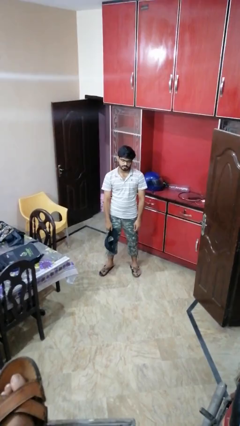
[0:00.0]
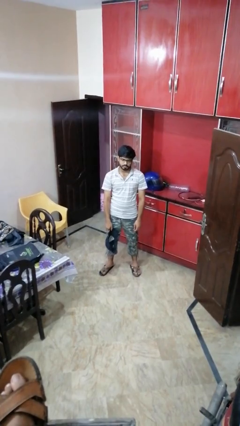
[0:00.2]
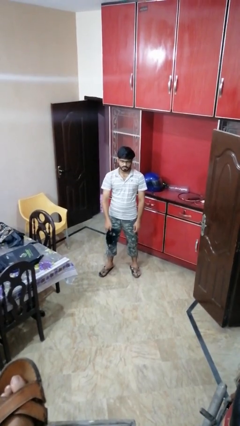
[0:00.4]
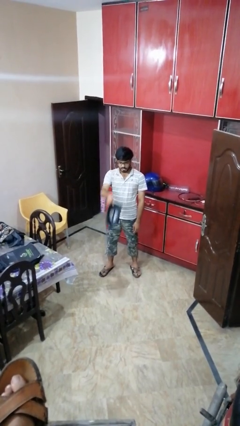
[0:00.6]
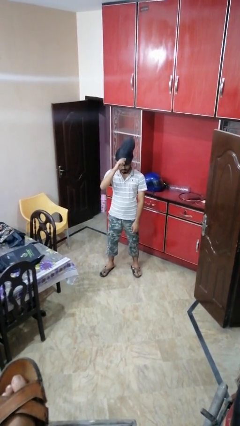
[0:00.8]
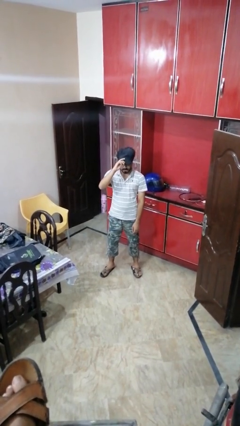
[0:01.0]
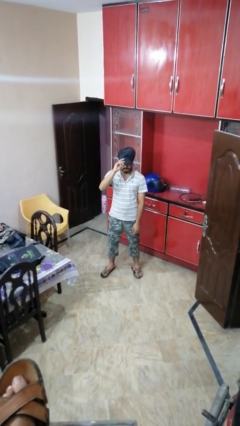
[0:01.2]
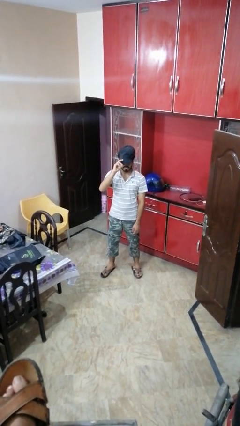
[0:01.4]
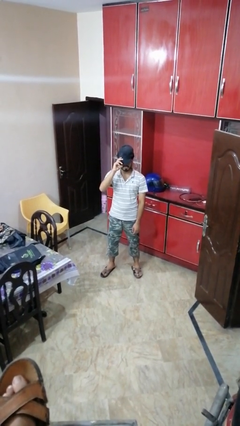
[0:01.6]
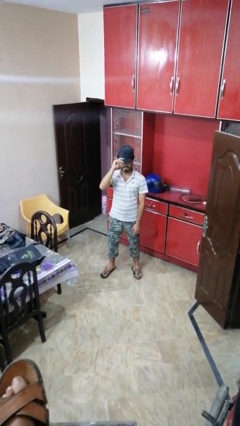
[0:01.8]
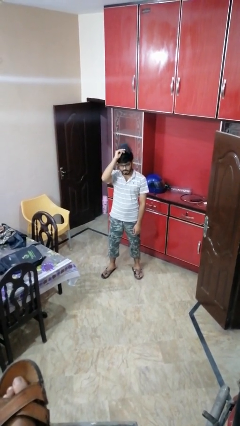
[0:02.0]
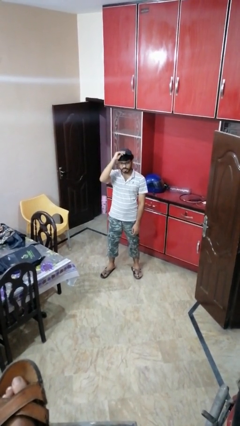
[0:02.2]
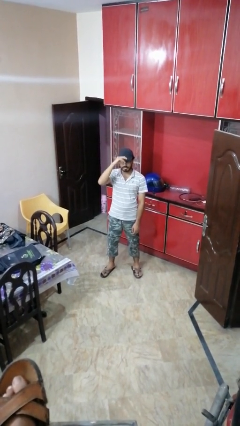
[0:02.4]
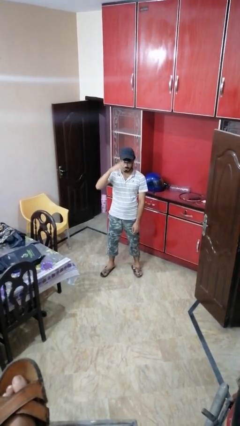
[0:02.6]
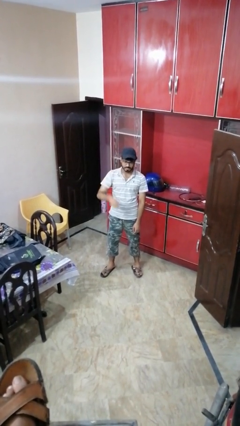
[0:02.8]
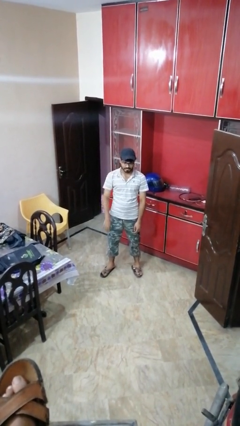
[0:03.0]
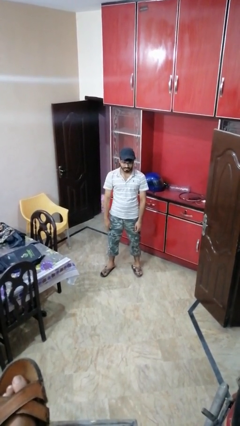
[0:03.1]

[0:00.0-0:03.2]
person puts on hat

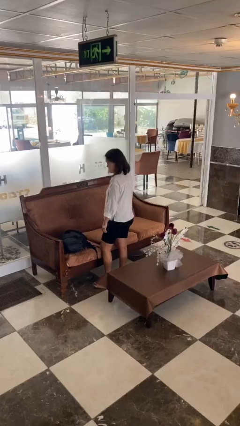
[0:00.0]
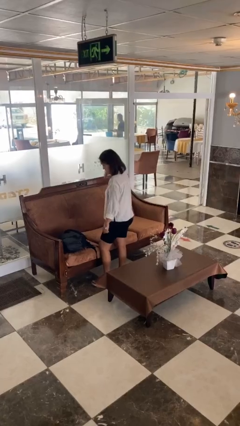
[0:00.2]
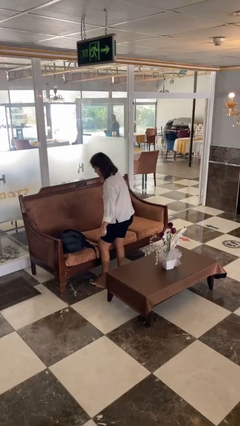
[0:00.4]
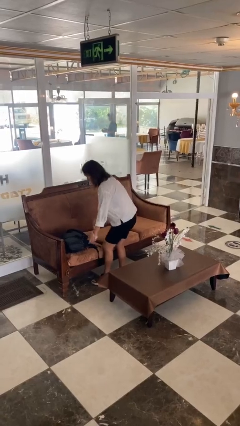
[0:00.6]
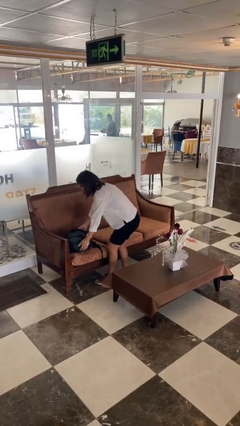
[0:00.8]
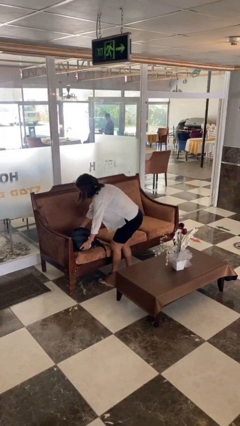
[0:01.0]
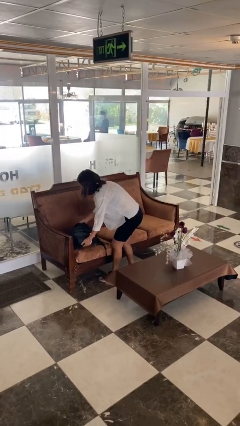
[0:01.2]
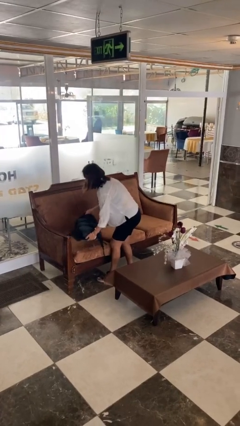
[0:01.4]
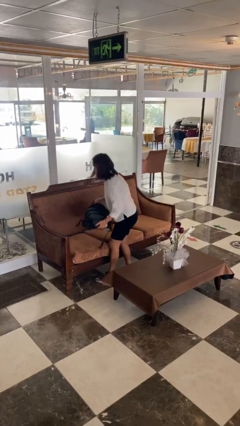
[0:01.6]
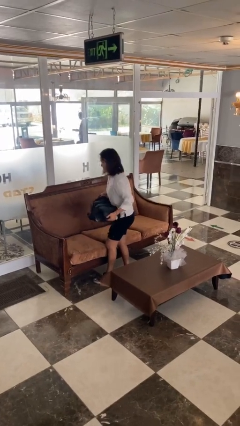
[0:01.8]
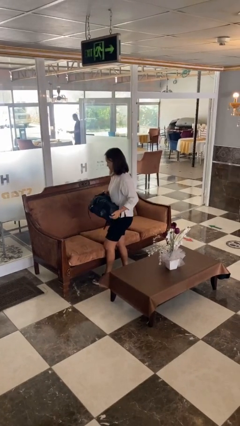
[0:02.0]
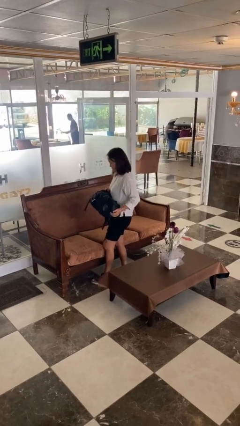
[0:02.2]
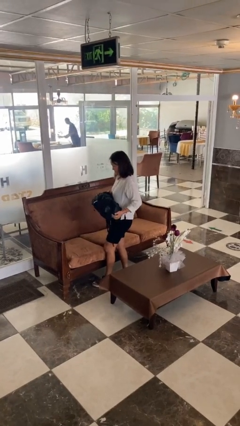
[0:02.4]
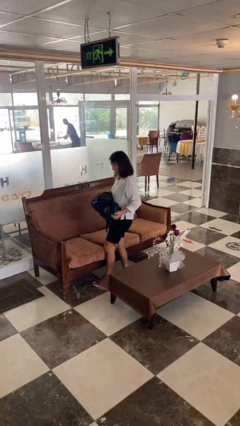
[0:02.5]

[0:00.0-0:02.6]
person picks up object from couch

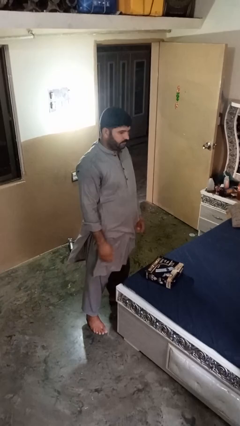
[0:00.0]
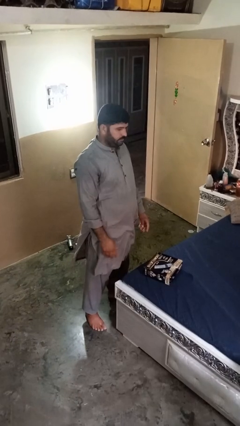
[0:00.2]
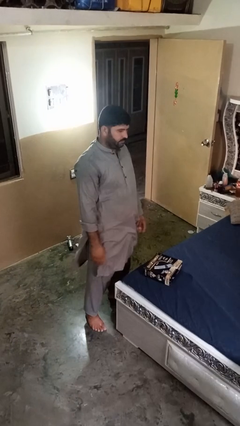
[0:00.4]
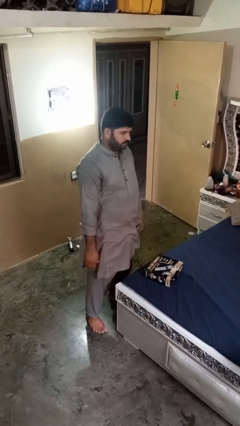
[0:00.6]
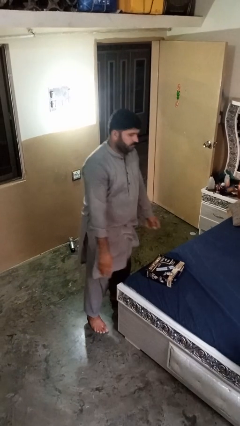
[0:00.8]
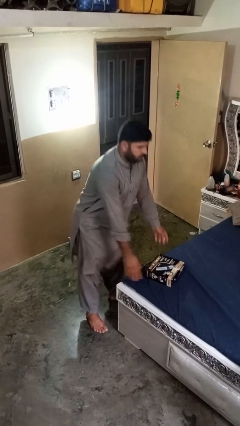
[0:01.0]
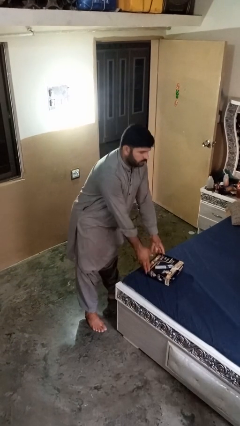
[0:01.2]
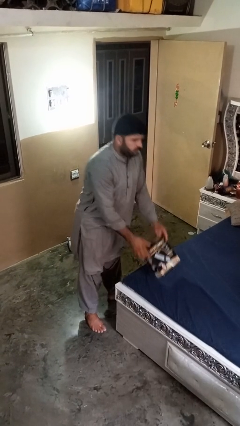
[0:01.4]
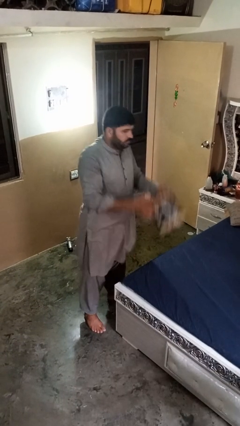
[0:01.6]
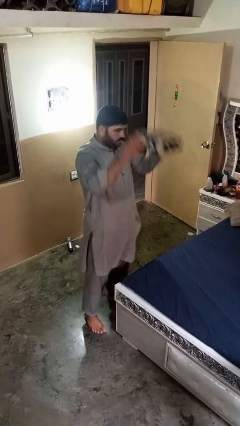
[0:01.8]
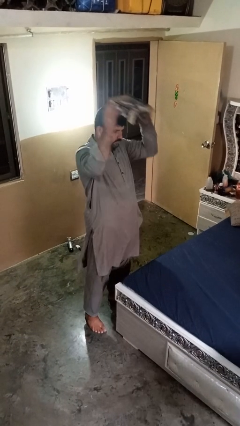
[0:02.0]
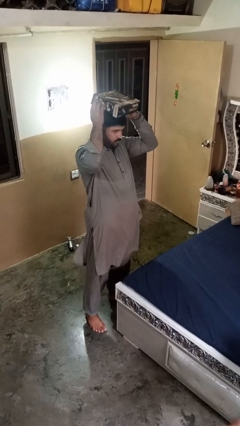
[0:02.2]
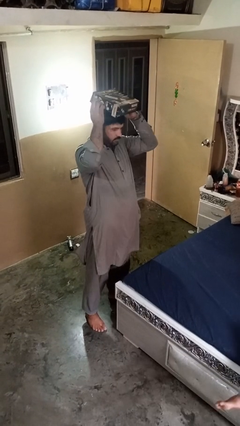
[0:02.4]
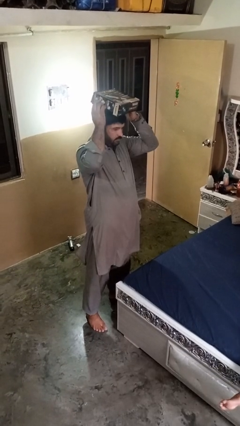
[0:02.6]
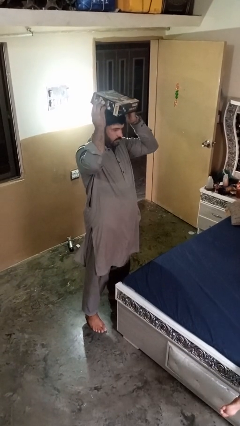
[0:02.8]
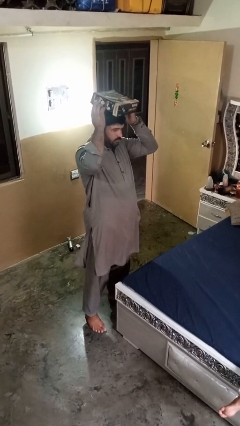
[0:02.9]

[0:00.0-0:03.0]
person holds object above head

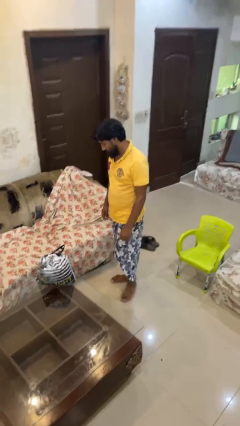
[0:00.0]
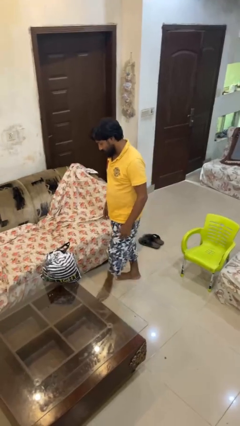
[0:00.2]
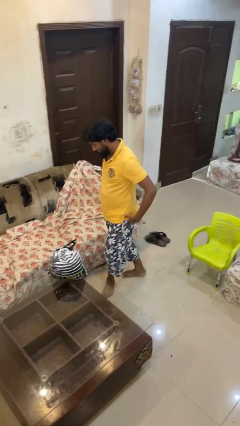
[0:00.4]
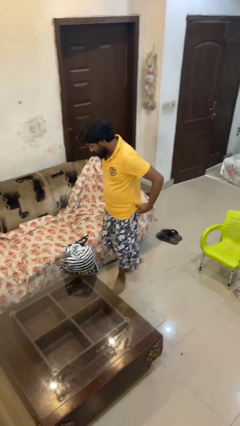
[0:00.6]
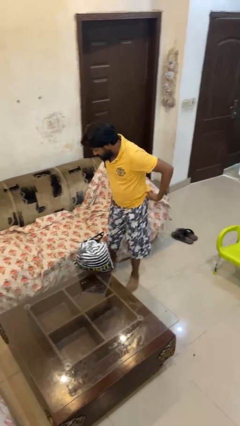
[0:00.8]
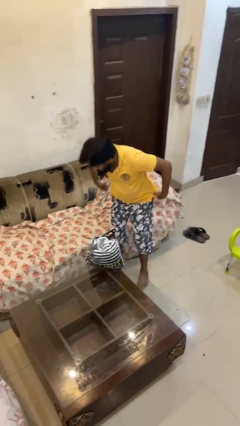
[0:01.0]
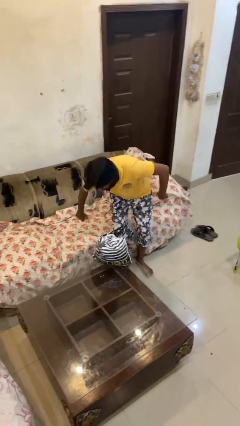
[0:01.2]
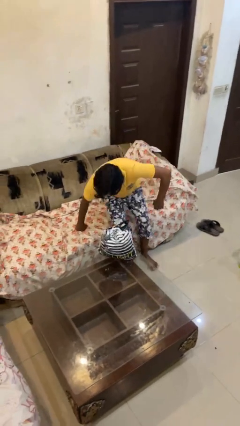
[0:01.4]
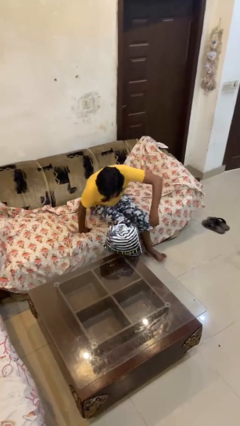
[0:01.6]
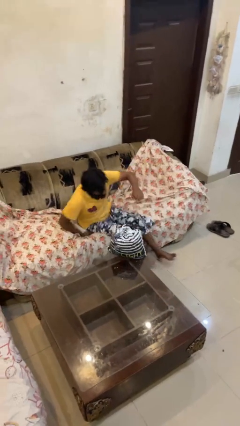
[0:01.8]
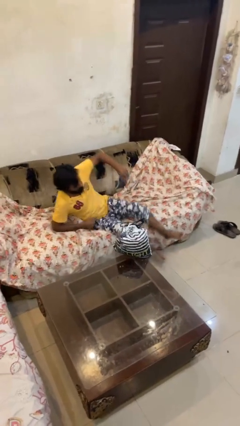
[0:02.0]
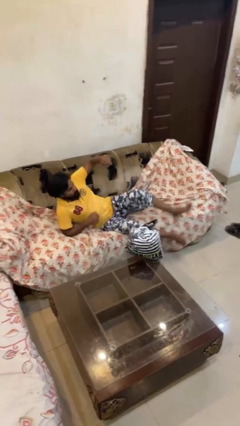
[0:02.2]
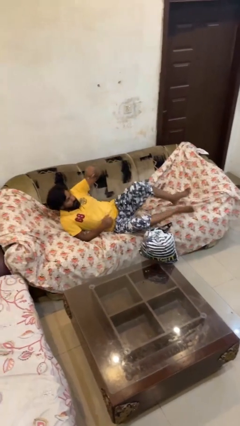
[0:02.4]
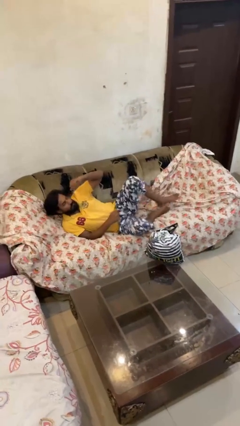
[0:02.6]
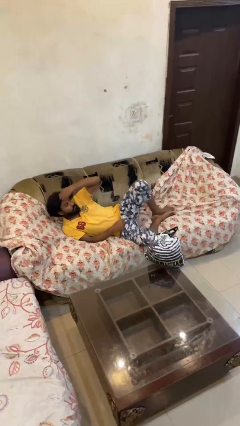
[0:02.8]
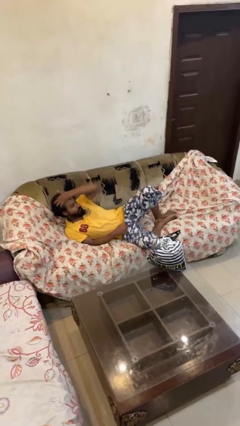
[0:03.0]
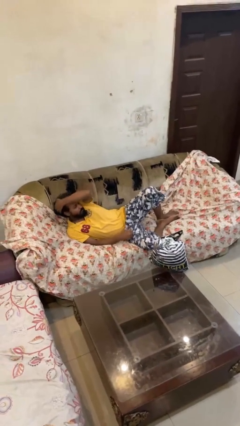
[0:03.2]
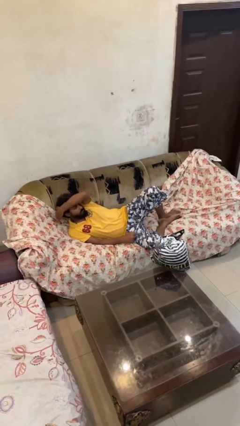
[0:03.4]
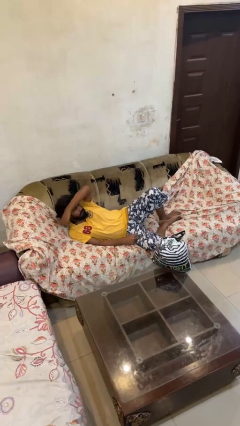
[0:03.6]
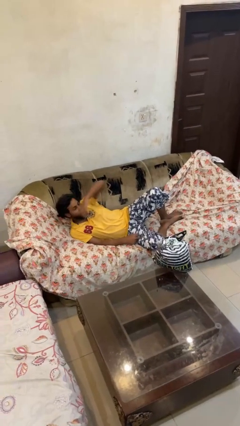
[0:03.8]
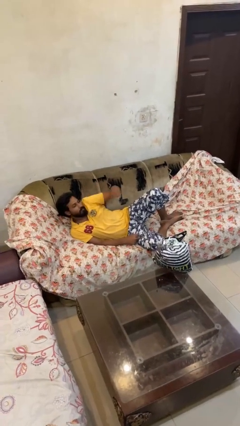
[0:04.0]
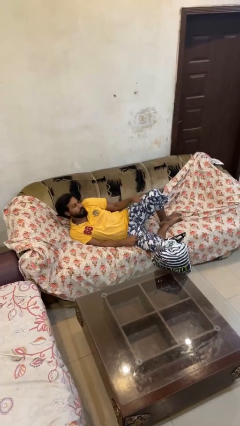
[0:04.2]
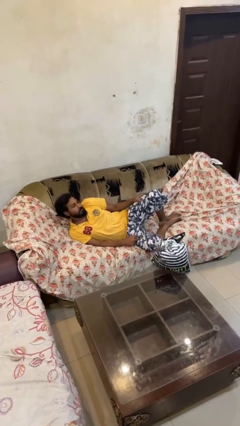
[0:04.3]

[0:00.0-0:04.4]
person lies down on couch

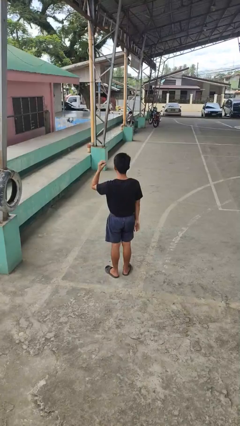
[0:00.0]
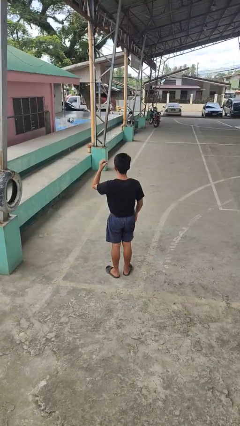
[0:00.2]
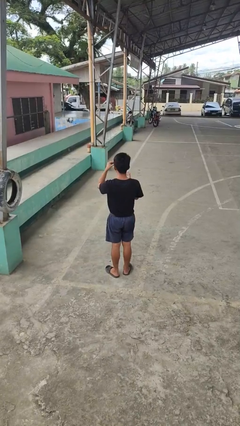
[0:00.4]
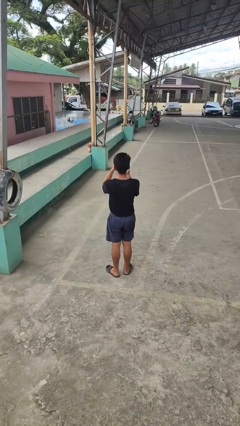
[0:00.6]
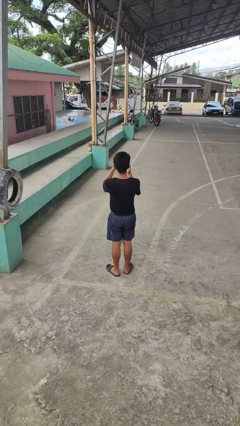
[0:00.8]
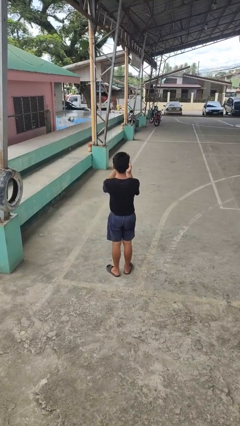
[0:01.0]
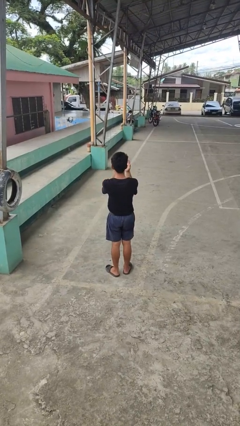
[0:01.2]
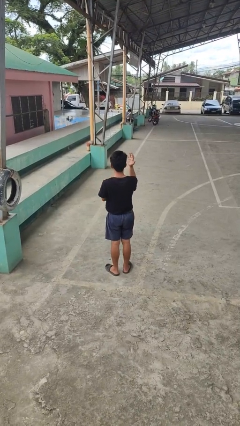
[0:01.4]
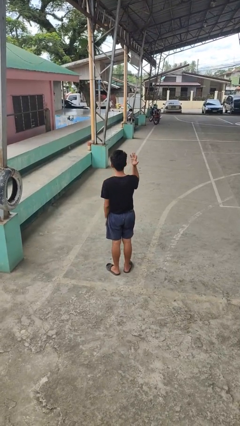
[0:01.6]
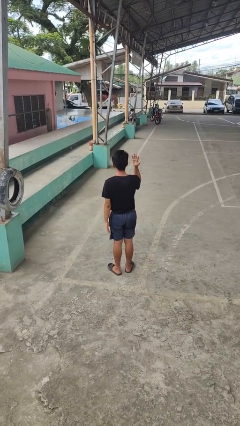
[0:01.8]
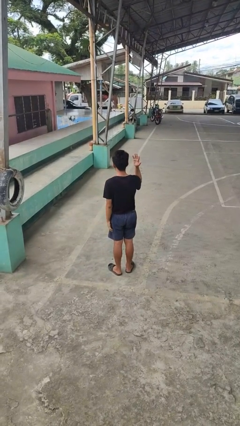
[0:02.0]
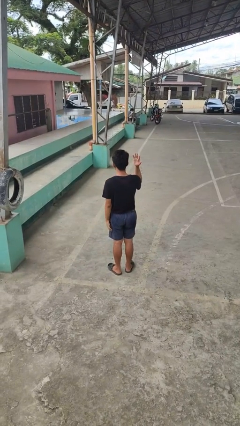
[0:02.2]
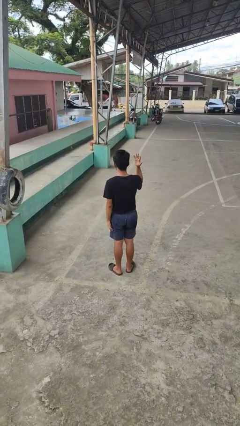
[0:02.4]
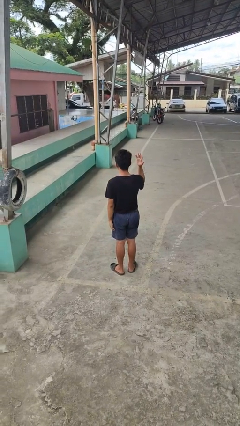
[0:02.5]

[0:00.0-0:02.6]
person puts on ring

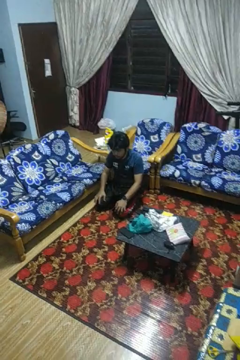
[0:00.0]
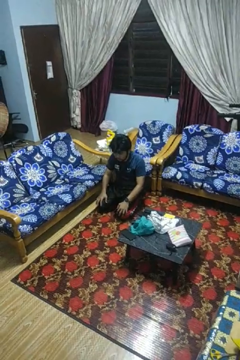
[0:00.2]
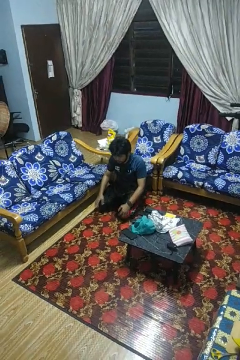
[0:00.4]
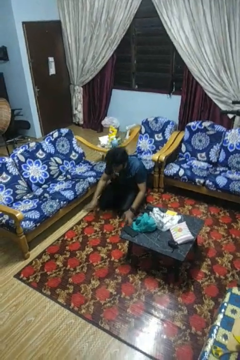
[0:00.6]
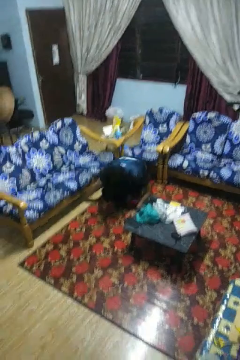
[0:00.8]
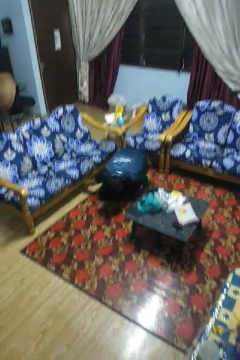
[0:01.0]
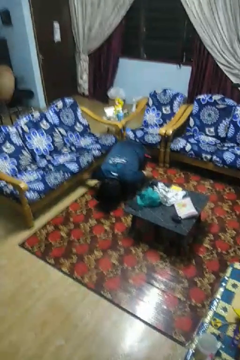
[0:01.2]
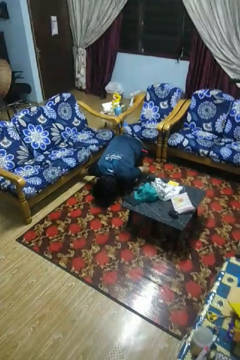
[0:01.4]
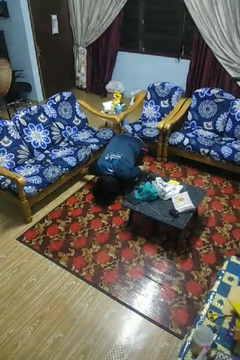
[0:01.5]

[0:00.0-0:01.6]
person searches under couch
